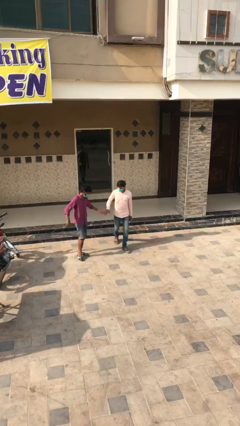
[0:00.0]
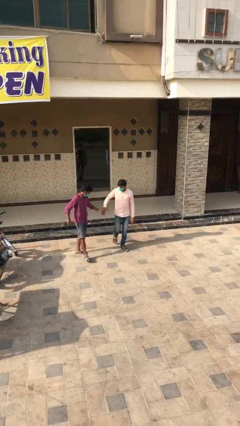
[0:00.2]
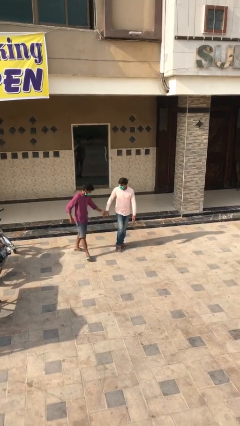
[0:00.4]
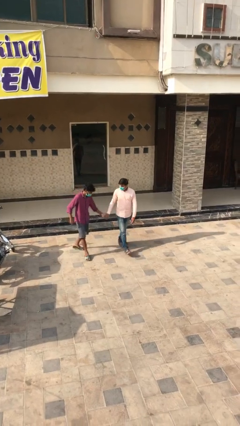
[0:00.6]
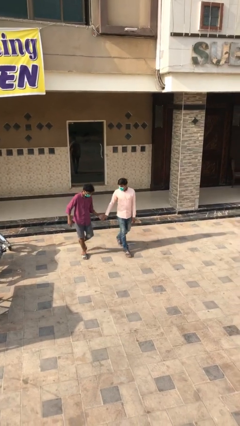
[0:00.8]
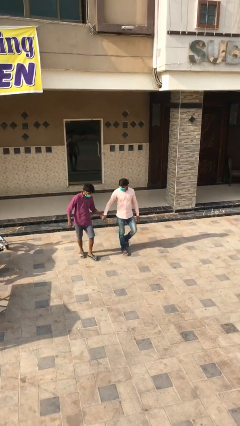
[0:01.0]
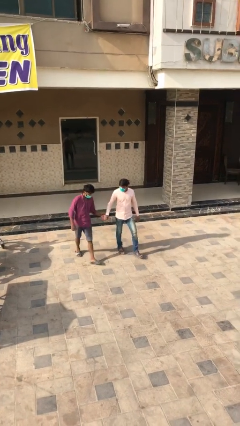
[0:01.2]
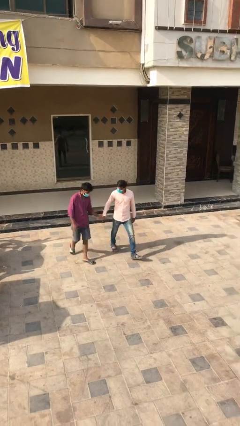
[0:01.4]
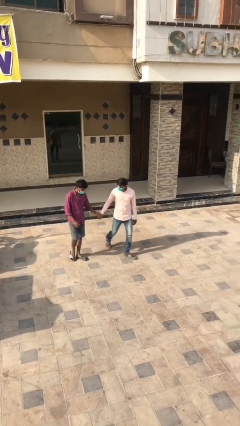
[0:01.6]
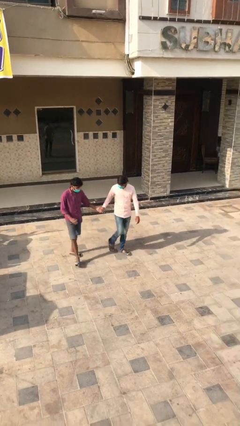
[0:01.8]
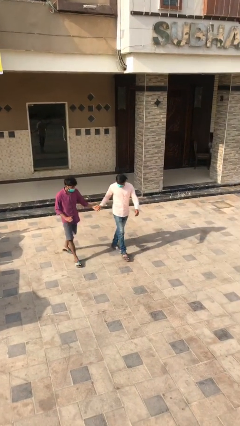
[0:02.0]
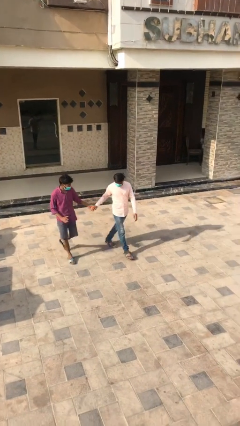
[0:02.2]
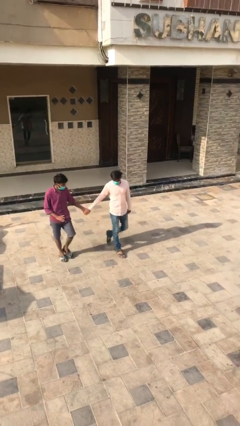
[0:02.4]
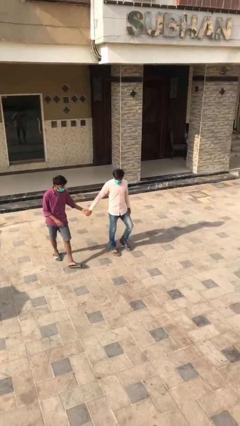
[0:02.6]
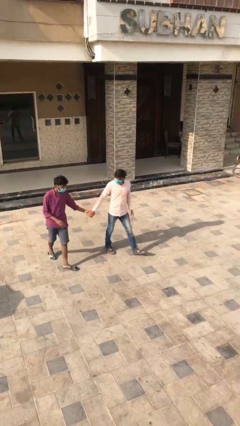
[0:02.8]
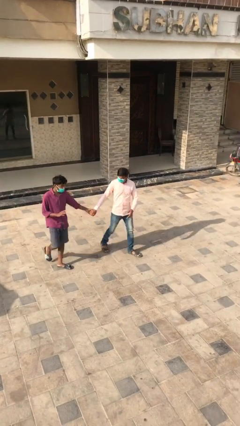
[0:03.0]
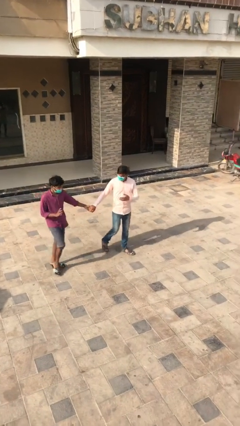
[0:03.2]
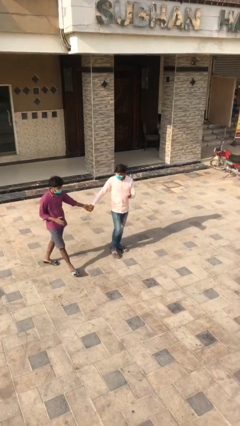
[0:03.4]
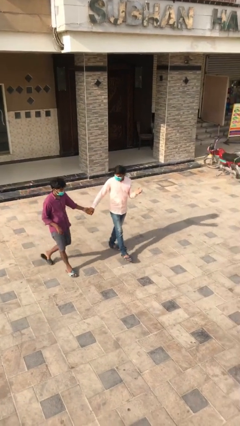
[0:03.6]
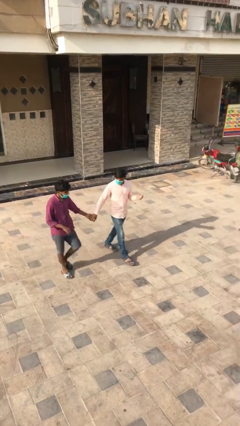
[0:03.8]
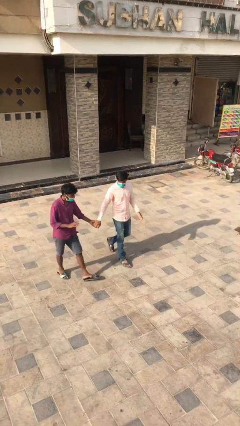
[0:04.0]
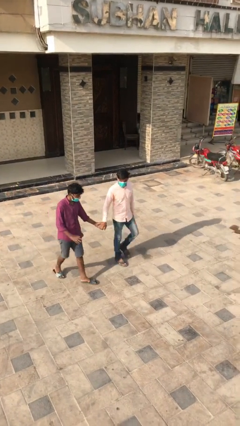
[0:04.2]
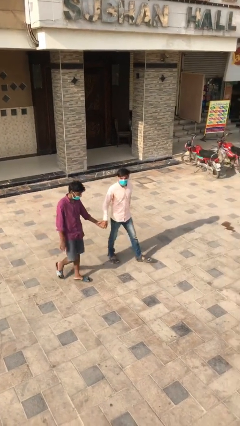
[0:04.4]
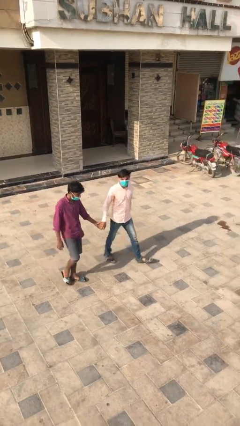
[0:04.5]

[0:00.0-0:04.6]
person holds hand

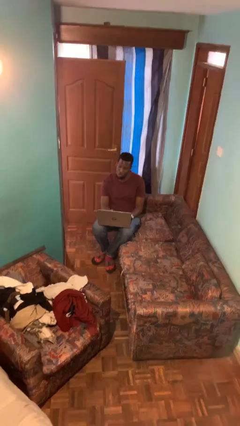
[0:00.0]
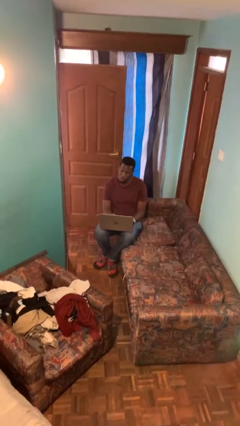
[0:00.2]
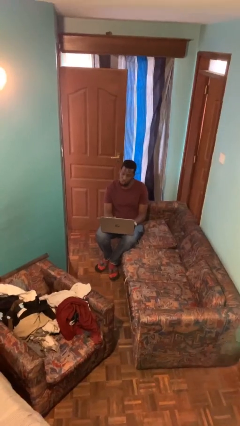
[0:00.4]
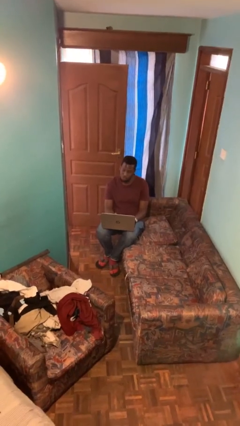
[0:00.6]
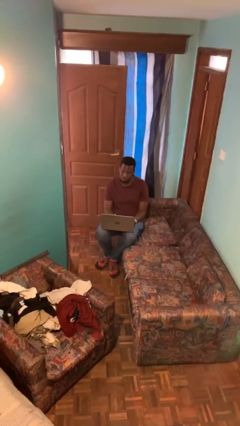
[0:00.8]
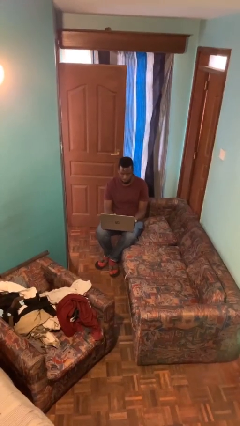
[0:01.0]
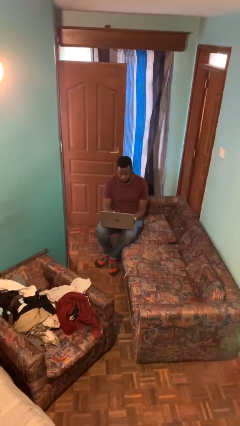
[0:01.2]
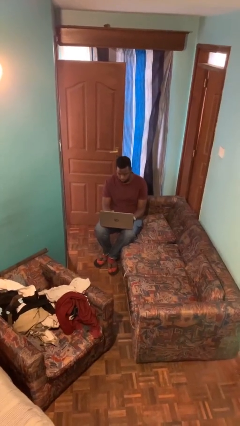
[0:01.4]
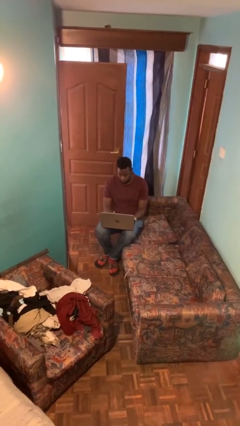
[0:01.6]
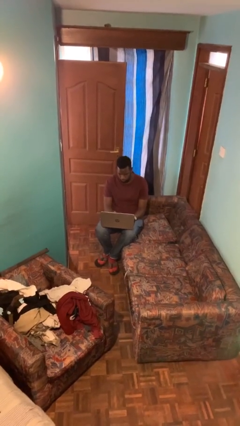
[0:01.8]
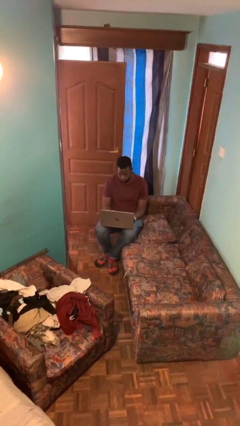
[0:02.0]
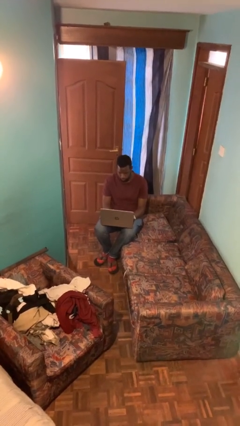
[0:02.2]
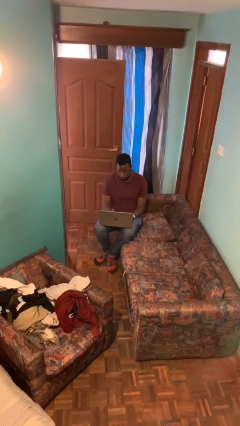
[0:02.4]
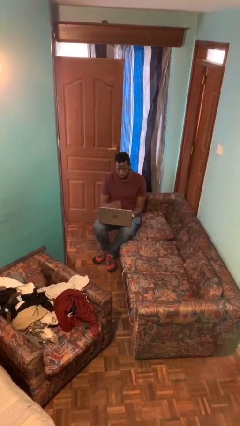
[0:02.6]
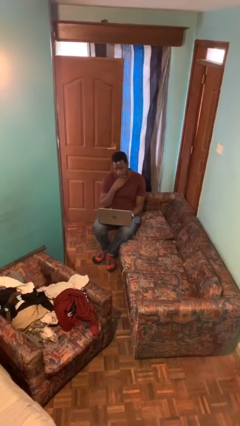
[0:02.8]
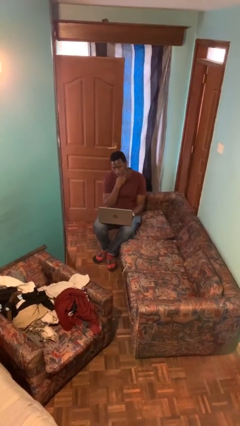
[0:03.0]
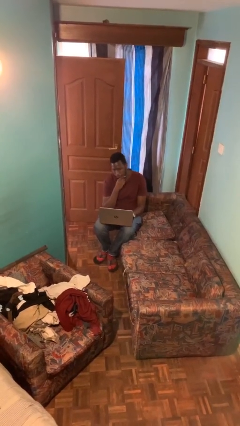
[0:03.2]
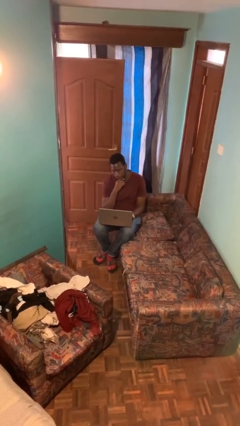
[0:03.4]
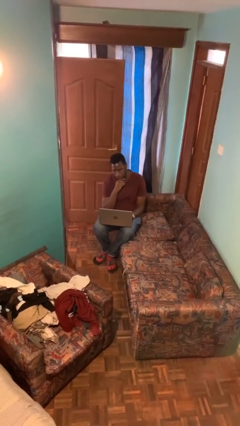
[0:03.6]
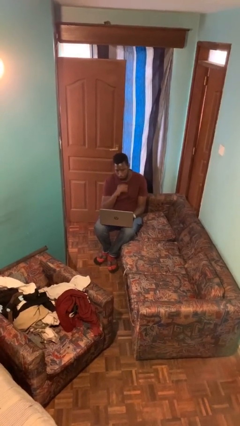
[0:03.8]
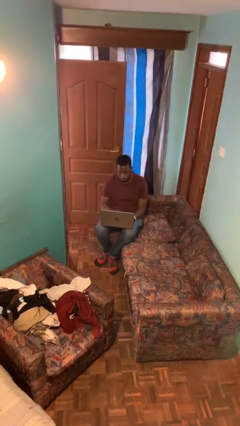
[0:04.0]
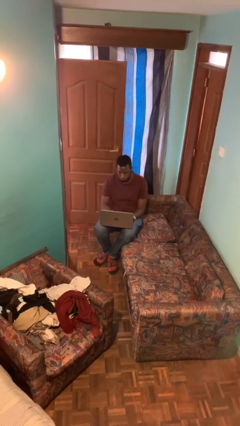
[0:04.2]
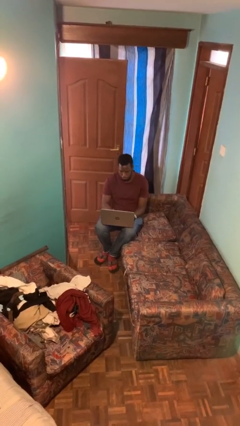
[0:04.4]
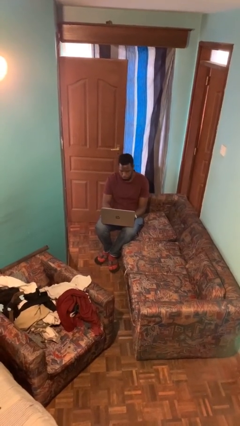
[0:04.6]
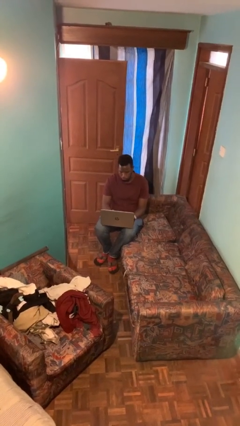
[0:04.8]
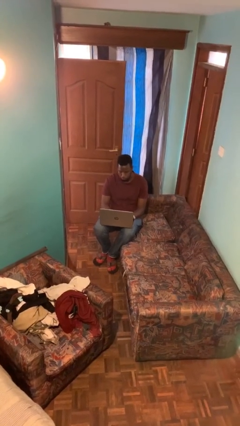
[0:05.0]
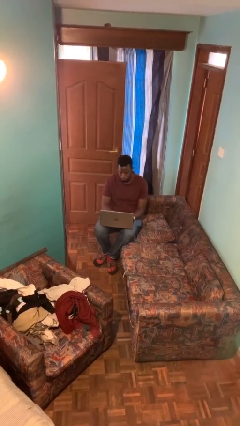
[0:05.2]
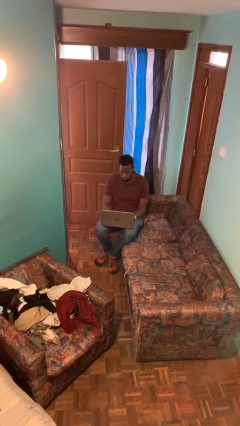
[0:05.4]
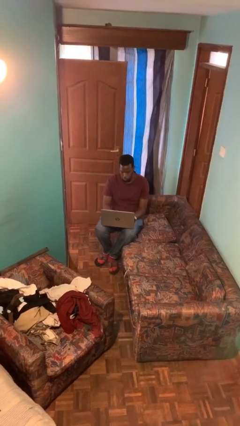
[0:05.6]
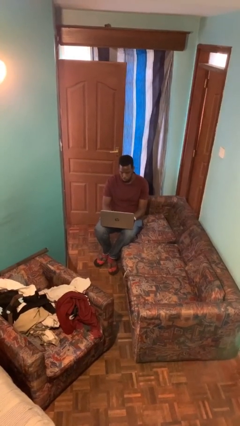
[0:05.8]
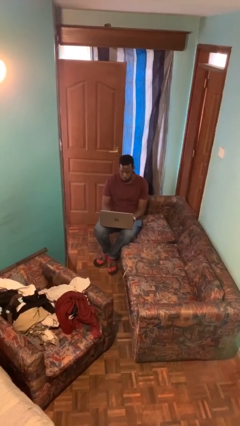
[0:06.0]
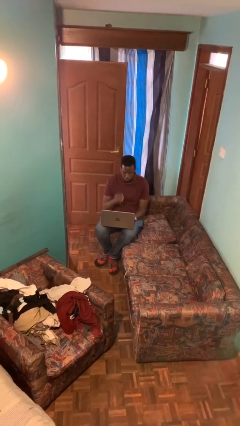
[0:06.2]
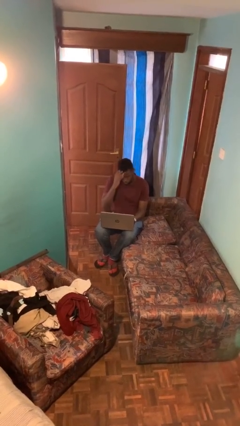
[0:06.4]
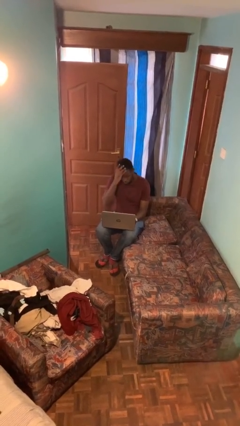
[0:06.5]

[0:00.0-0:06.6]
person interacts with laptop

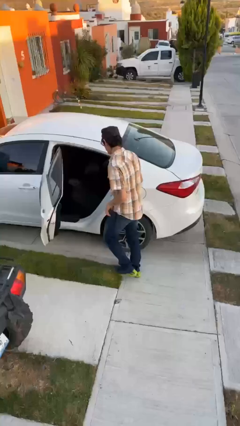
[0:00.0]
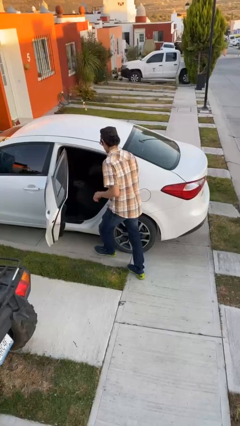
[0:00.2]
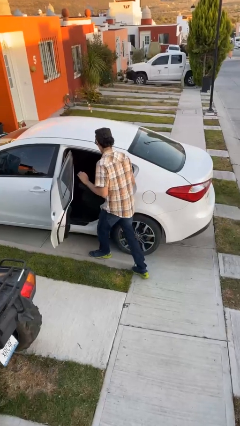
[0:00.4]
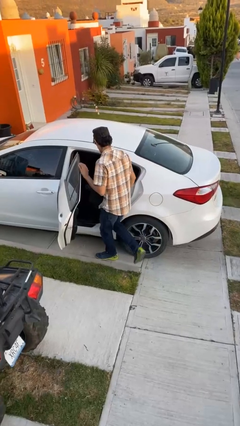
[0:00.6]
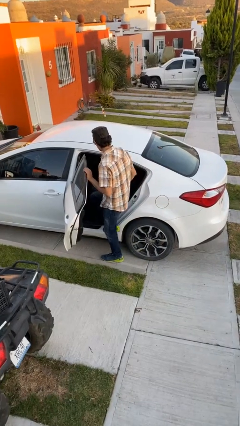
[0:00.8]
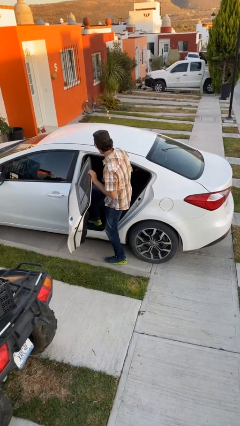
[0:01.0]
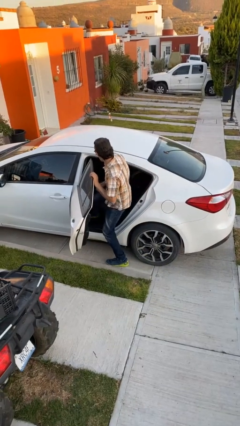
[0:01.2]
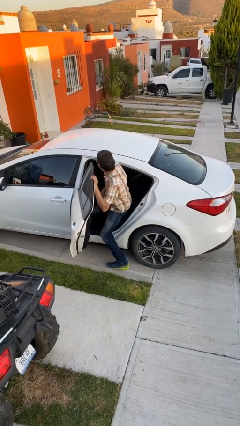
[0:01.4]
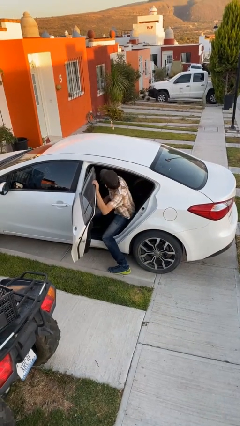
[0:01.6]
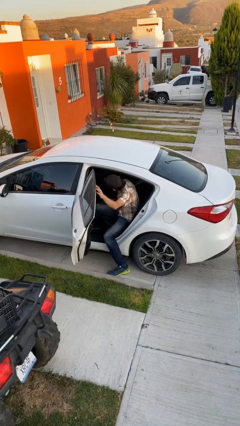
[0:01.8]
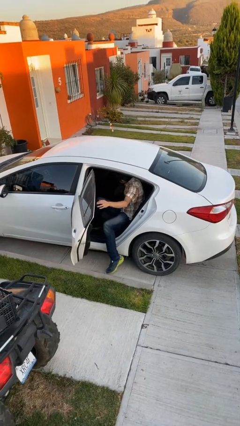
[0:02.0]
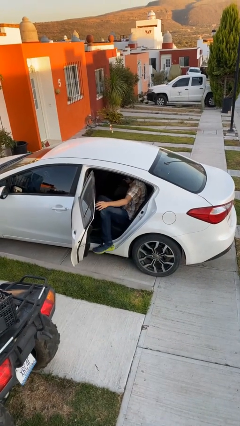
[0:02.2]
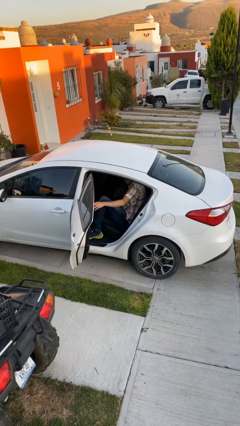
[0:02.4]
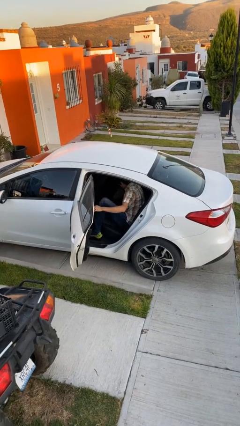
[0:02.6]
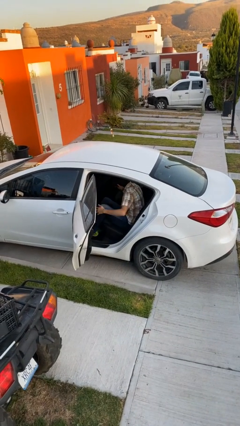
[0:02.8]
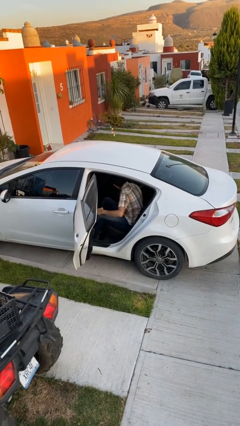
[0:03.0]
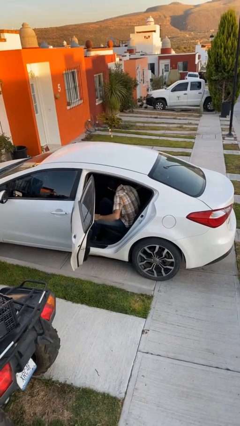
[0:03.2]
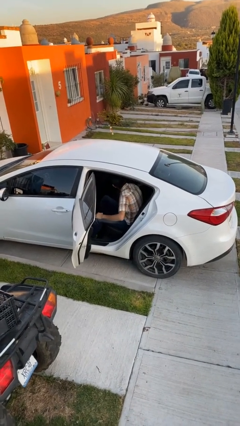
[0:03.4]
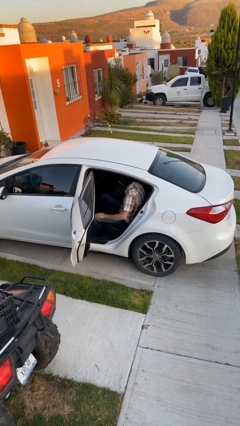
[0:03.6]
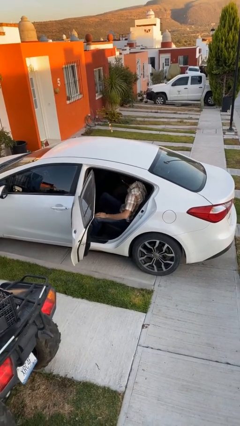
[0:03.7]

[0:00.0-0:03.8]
person exits car

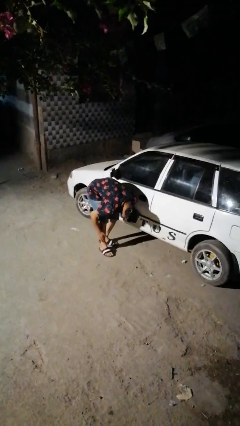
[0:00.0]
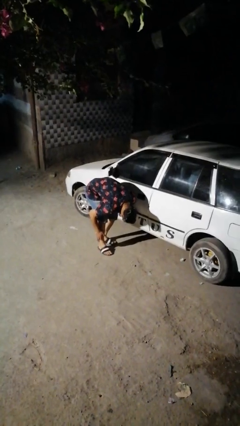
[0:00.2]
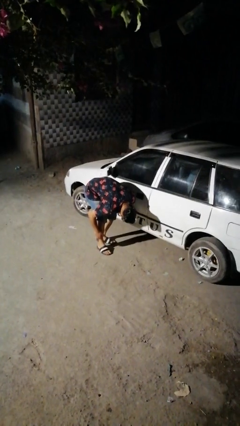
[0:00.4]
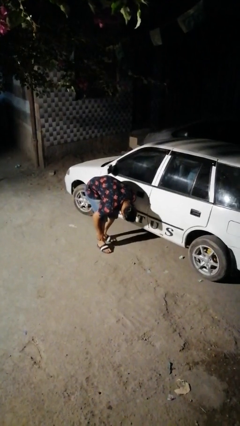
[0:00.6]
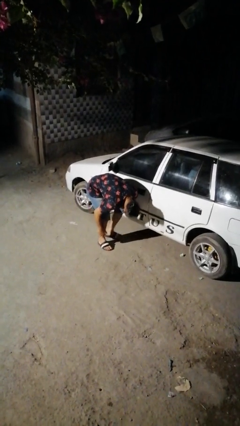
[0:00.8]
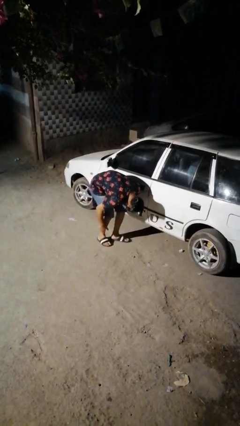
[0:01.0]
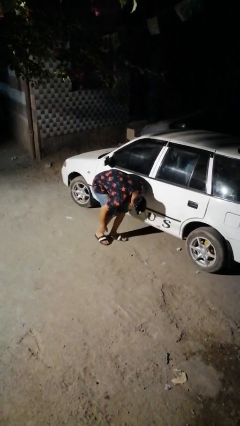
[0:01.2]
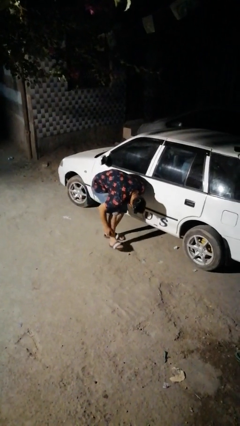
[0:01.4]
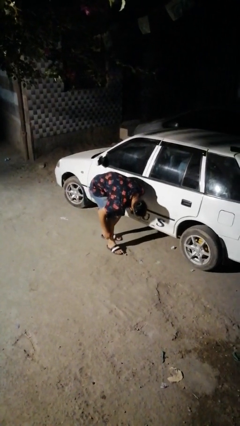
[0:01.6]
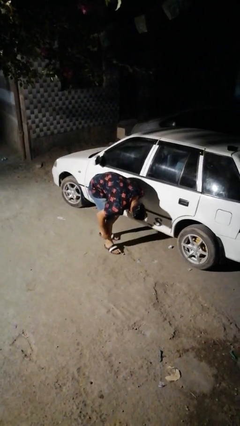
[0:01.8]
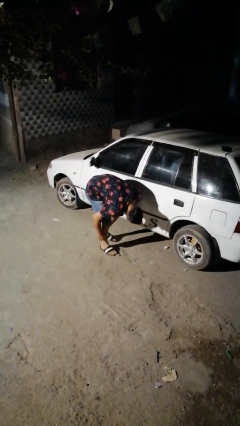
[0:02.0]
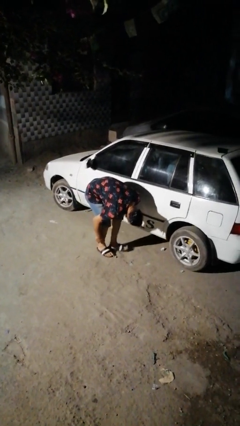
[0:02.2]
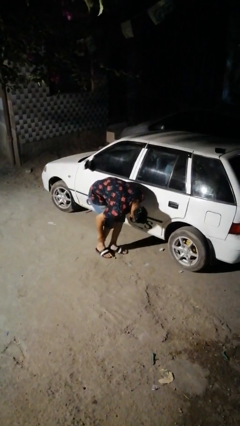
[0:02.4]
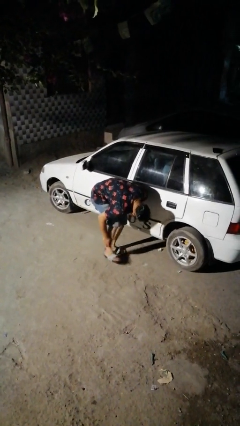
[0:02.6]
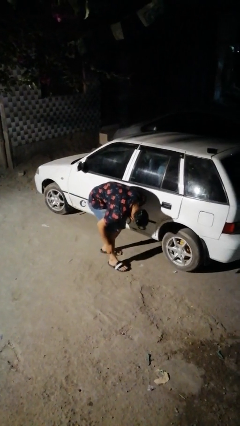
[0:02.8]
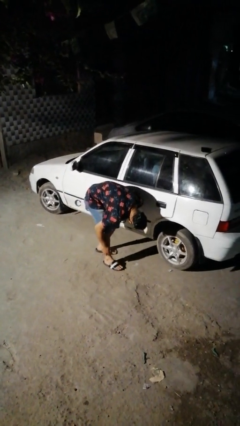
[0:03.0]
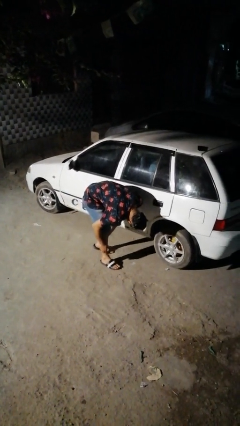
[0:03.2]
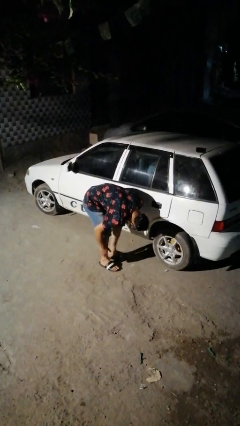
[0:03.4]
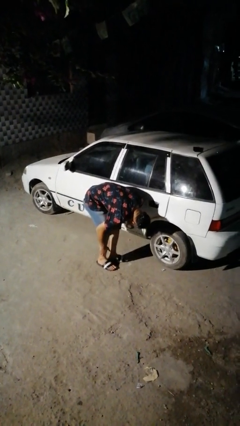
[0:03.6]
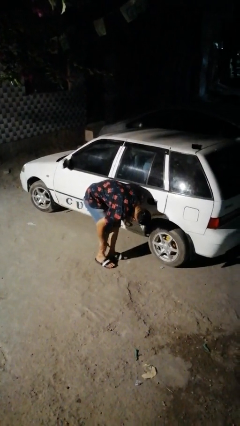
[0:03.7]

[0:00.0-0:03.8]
person crawls out from under vehicle
